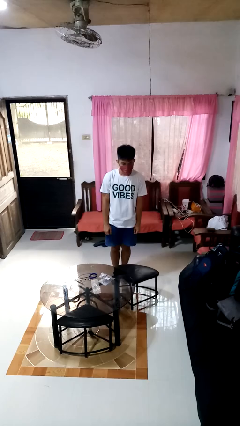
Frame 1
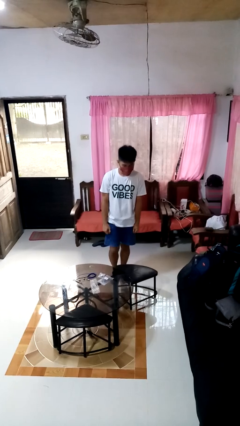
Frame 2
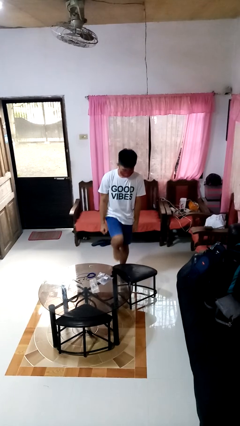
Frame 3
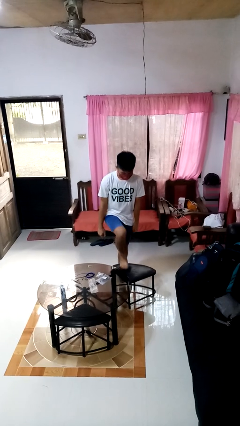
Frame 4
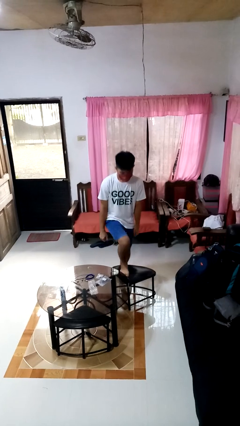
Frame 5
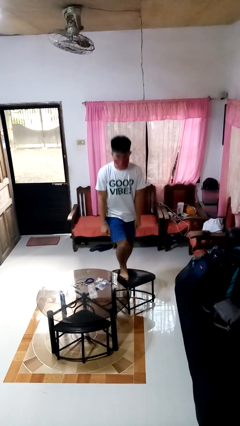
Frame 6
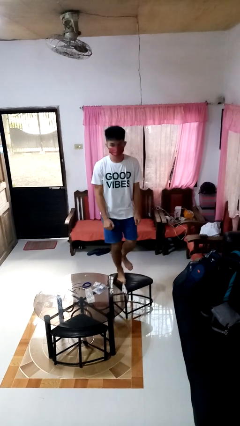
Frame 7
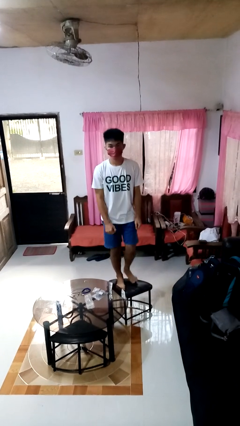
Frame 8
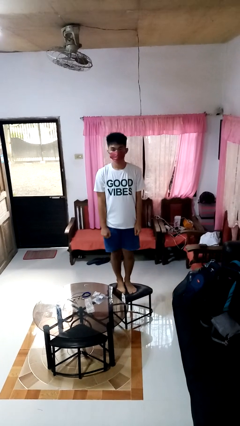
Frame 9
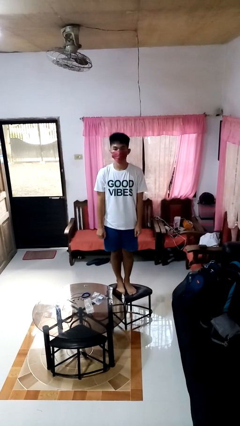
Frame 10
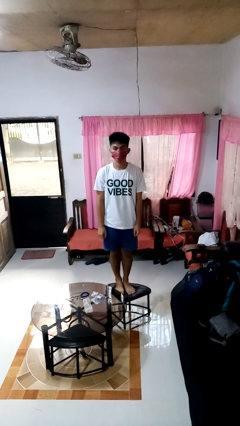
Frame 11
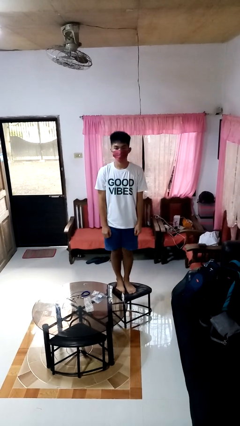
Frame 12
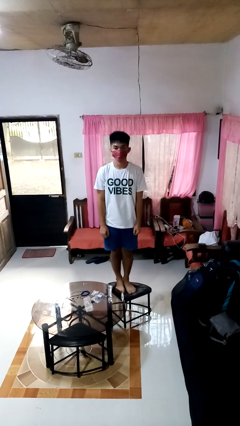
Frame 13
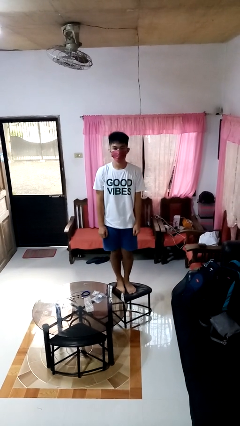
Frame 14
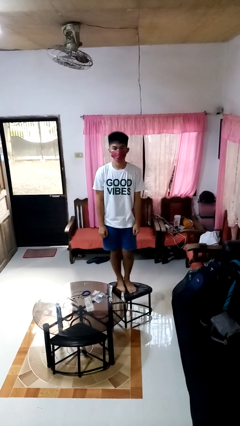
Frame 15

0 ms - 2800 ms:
person climbs on chair

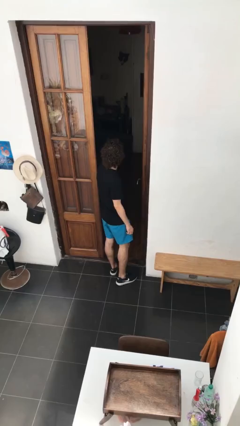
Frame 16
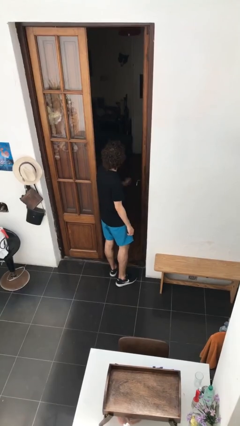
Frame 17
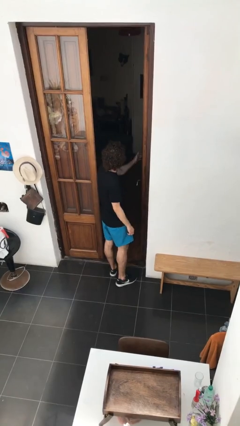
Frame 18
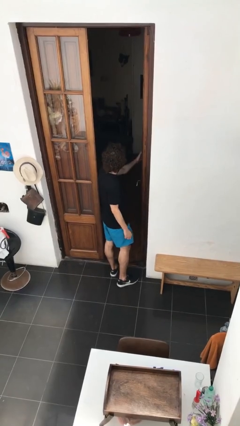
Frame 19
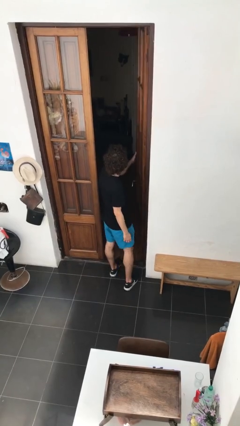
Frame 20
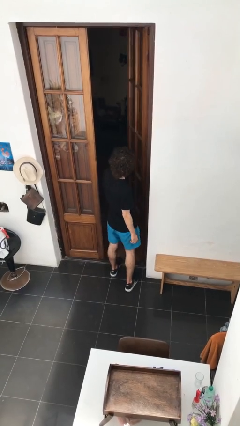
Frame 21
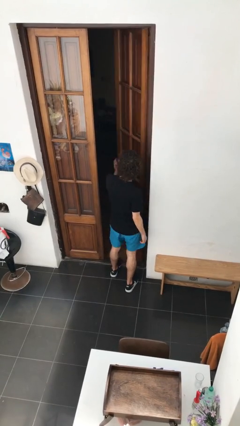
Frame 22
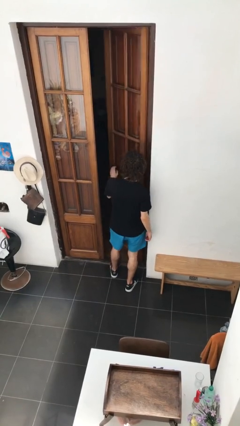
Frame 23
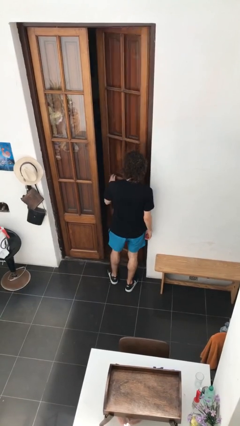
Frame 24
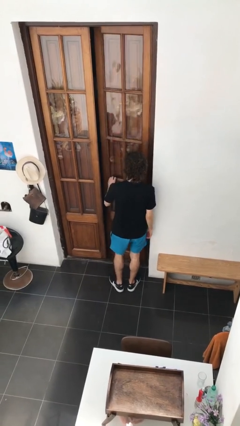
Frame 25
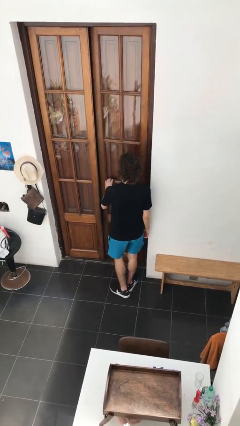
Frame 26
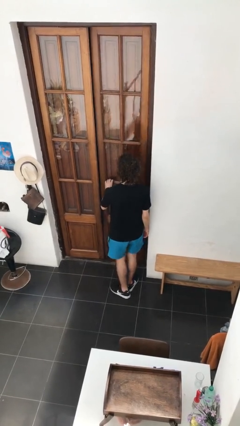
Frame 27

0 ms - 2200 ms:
person closes facility door

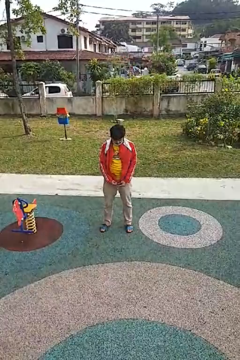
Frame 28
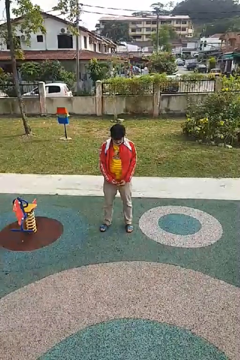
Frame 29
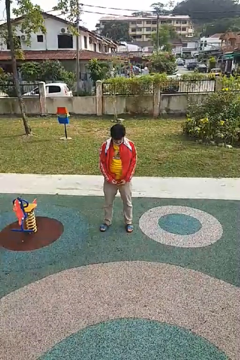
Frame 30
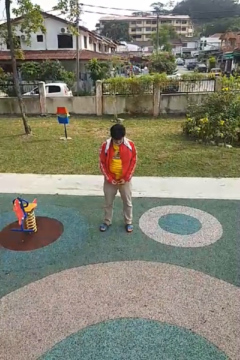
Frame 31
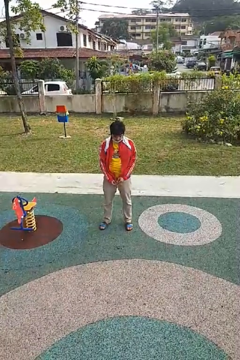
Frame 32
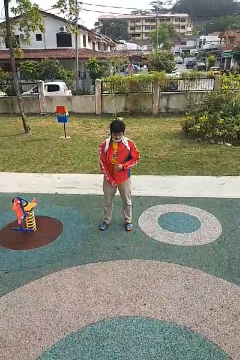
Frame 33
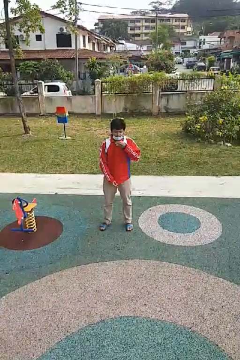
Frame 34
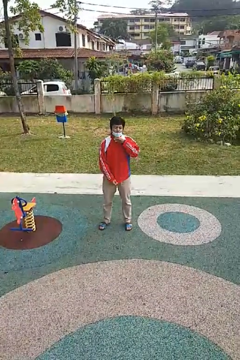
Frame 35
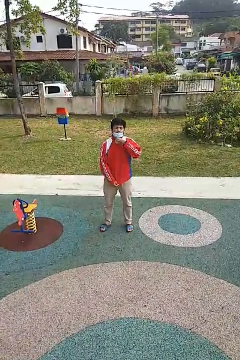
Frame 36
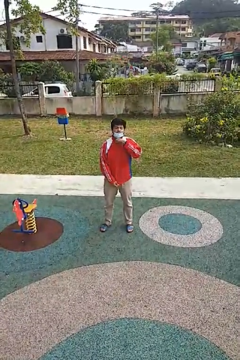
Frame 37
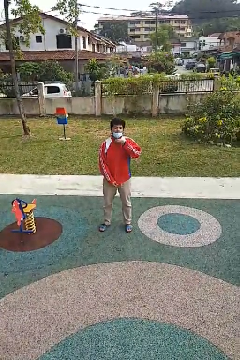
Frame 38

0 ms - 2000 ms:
person zips up jacket

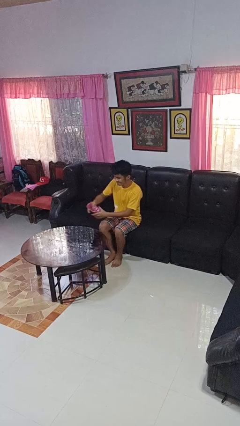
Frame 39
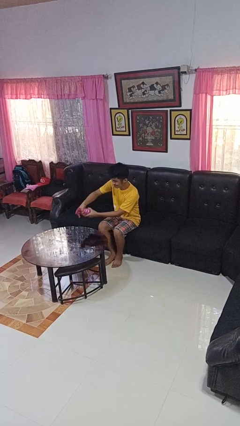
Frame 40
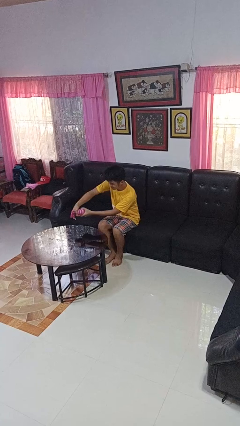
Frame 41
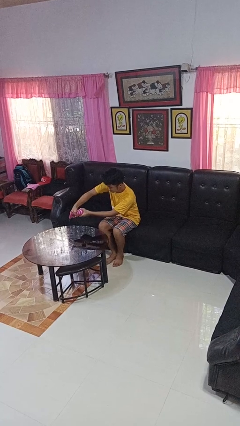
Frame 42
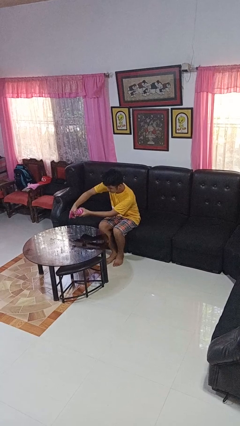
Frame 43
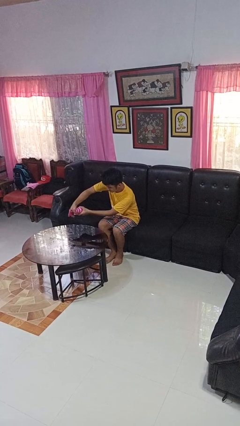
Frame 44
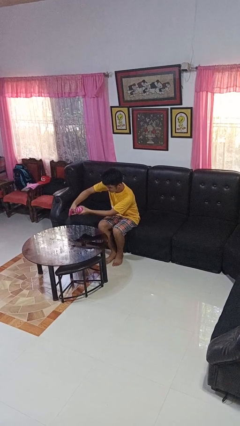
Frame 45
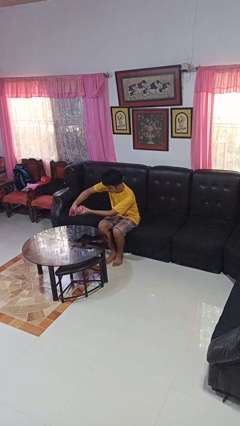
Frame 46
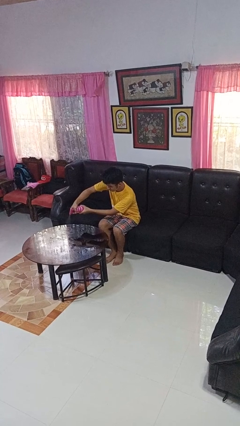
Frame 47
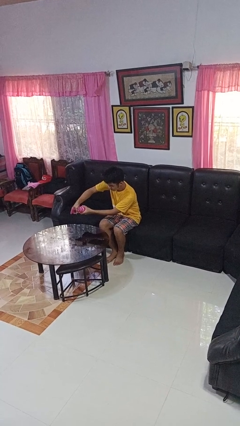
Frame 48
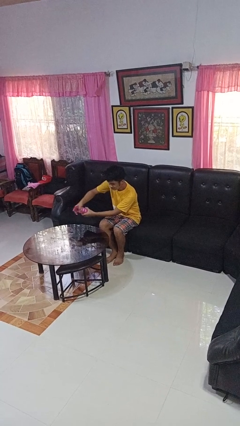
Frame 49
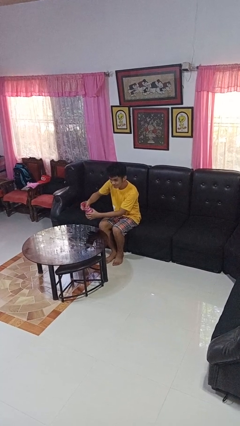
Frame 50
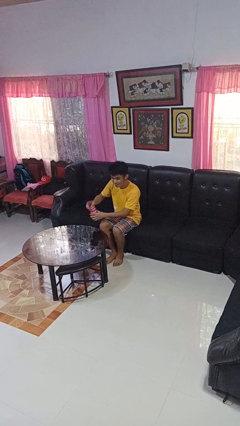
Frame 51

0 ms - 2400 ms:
person sprays from bottle

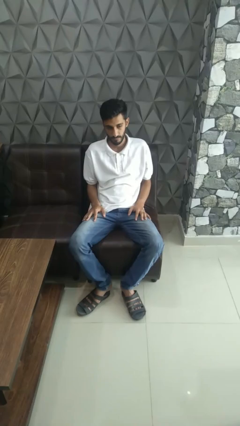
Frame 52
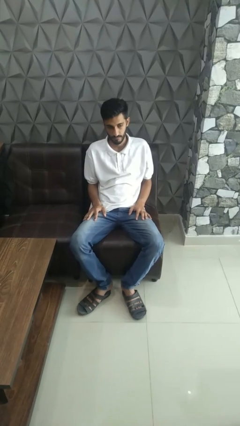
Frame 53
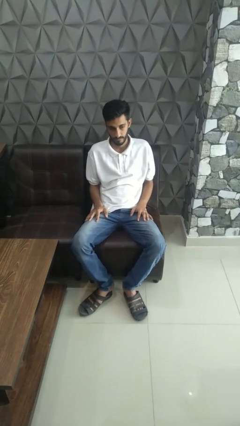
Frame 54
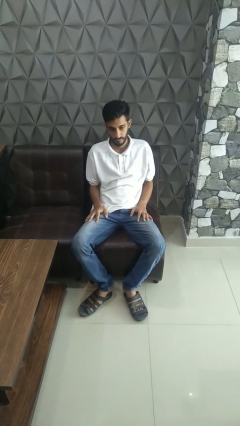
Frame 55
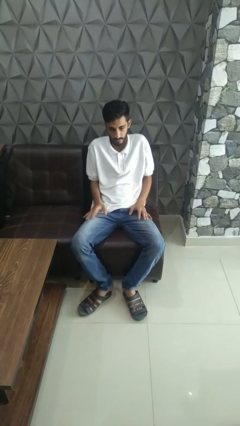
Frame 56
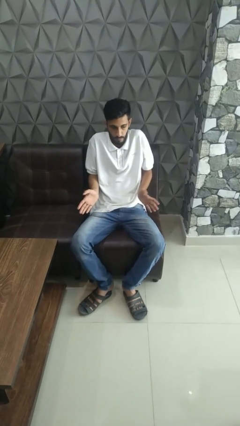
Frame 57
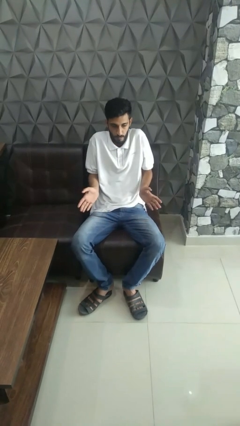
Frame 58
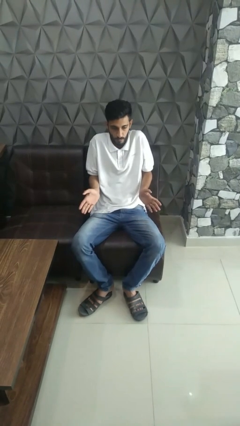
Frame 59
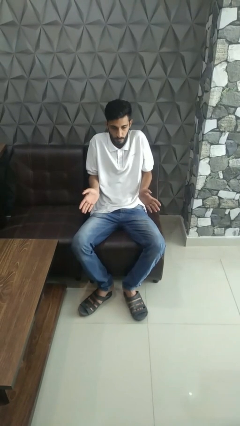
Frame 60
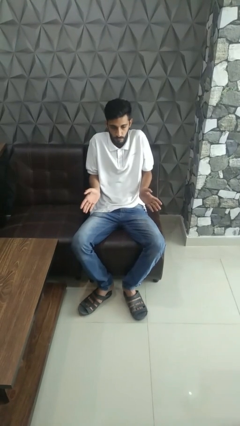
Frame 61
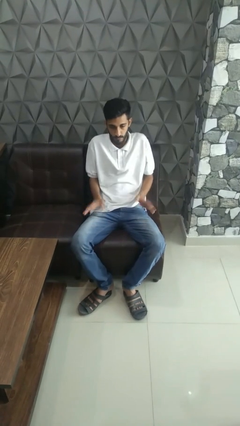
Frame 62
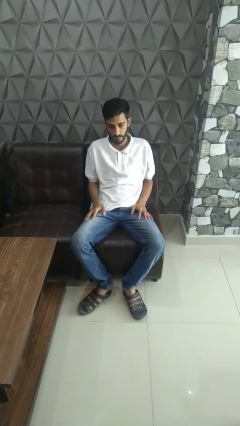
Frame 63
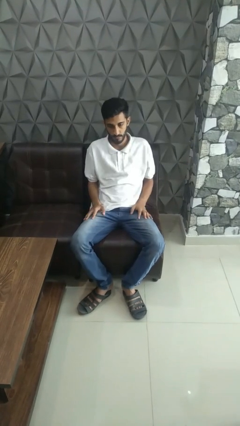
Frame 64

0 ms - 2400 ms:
person shrugs

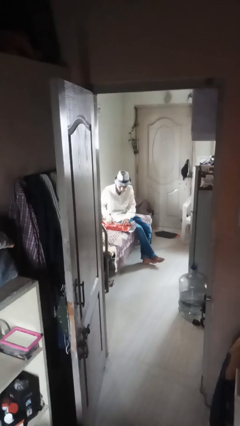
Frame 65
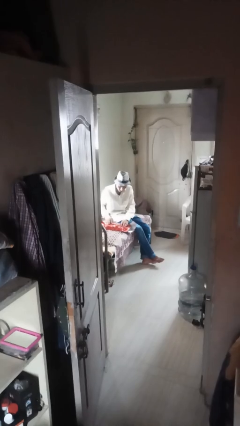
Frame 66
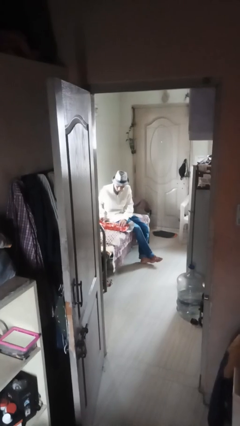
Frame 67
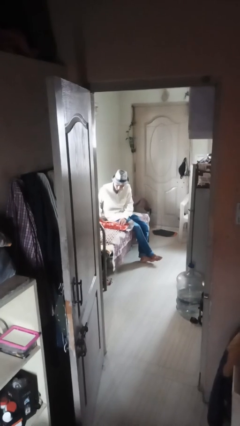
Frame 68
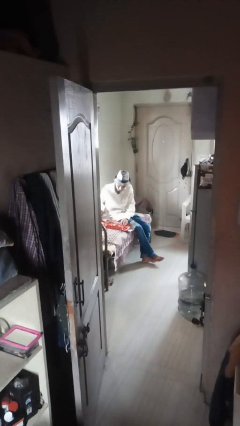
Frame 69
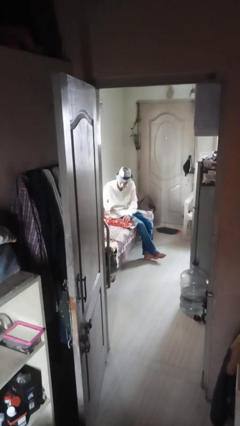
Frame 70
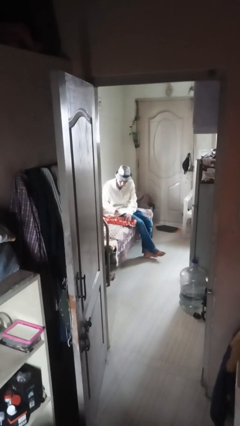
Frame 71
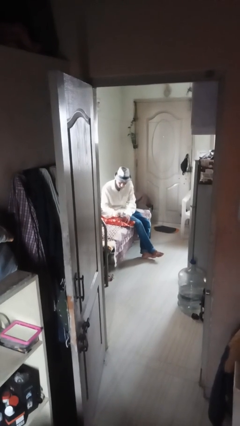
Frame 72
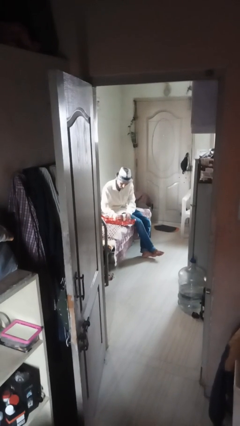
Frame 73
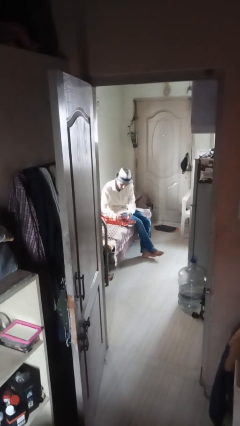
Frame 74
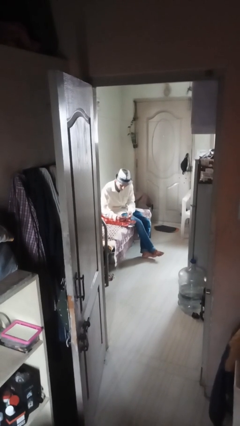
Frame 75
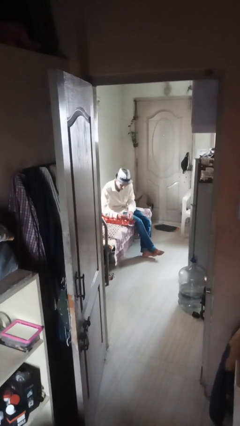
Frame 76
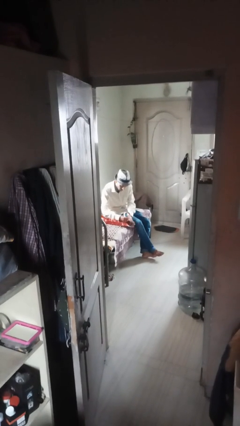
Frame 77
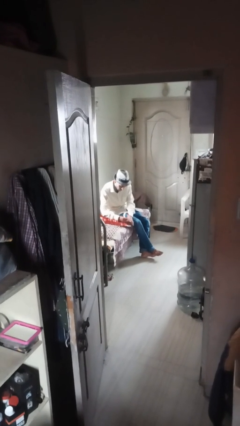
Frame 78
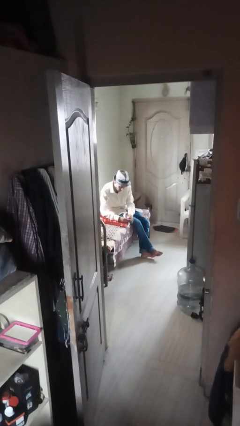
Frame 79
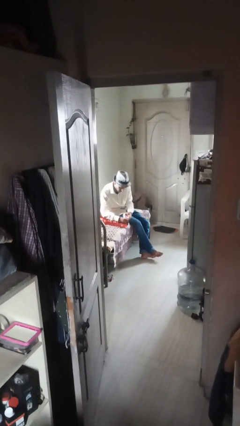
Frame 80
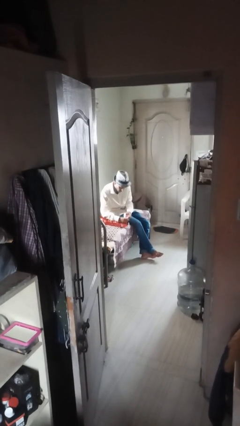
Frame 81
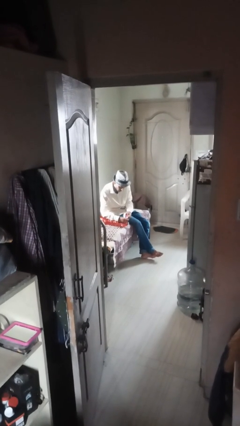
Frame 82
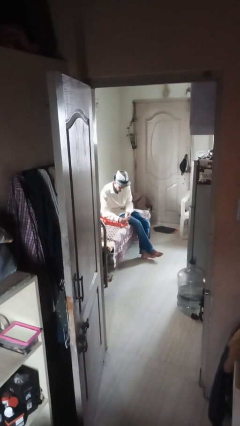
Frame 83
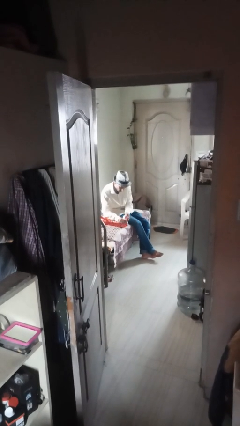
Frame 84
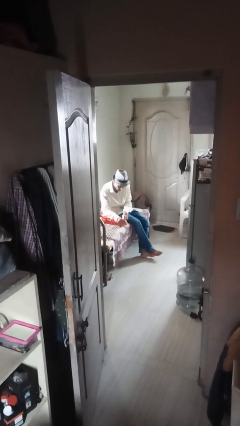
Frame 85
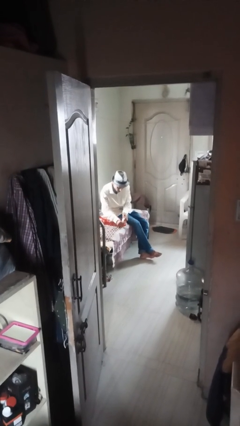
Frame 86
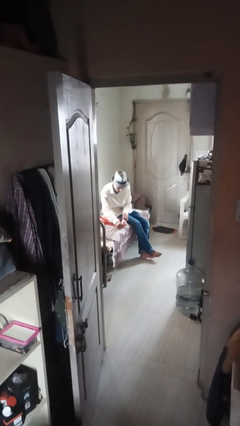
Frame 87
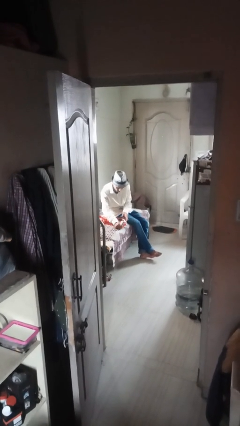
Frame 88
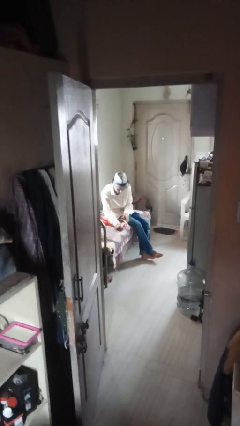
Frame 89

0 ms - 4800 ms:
person wraps box

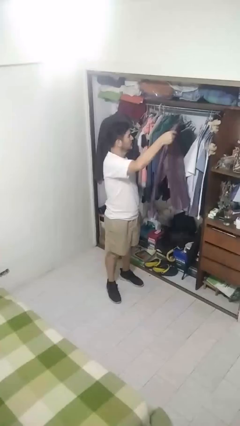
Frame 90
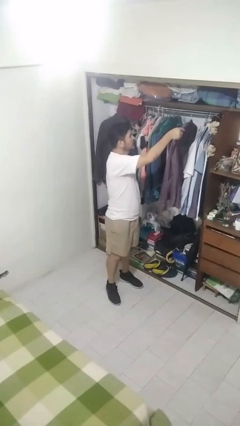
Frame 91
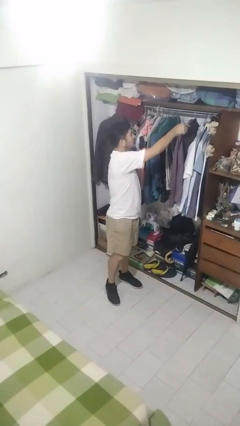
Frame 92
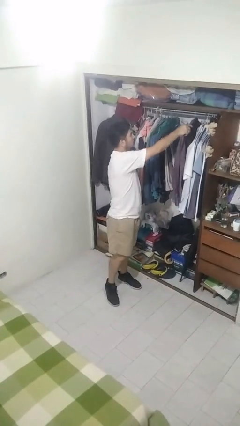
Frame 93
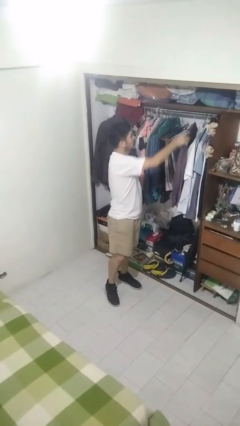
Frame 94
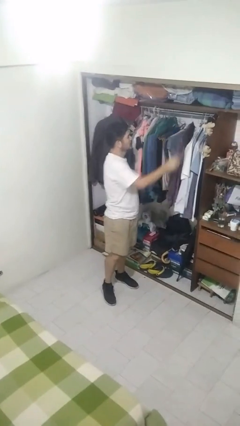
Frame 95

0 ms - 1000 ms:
person puts clothes into closet
